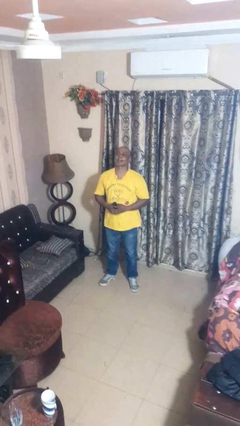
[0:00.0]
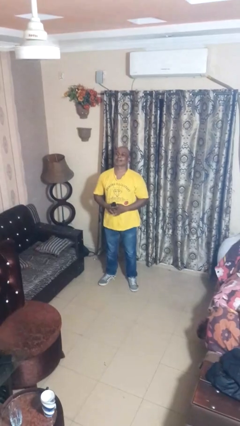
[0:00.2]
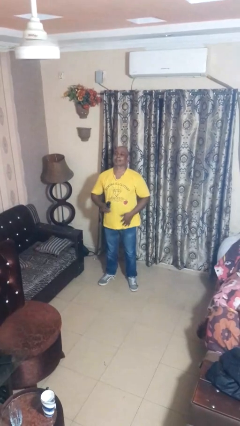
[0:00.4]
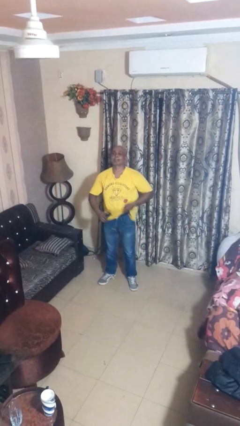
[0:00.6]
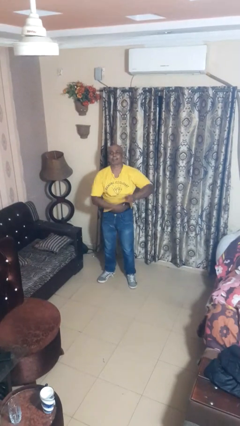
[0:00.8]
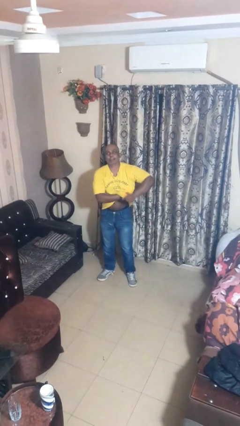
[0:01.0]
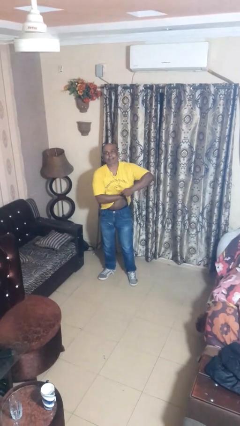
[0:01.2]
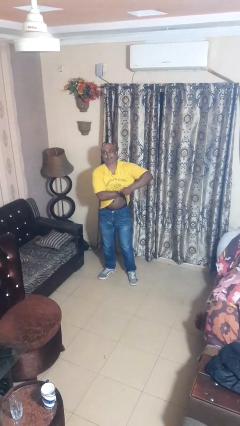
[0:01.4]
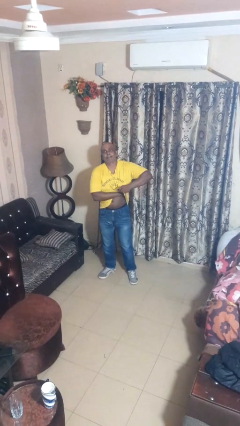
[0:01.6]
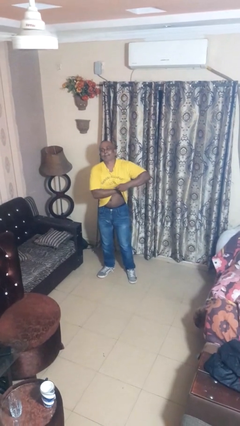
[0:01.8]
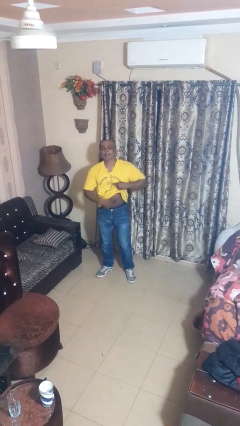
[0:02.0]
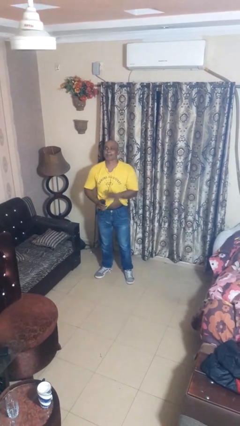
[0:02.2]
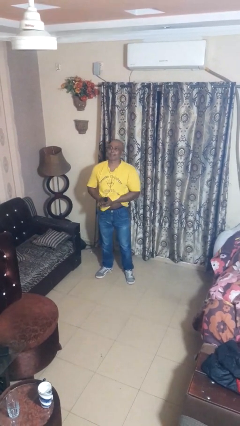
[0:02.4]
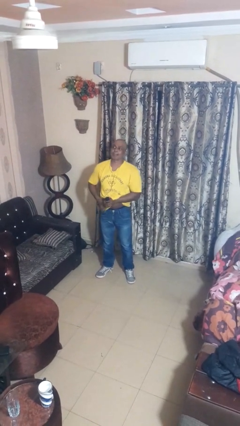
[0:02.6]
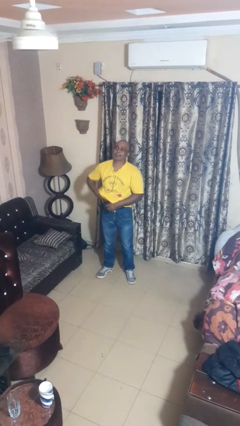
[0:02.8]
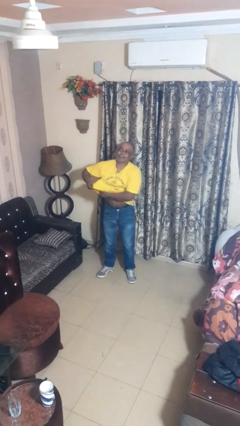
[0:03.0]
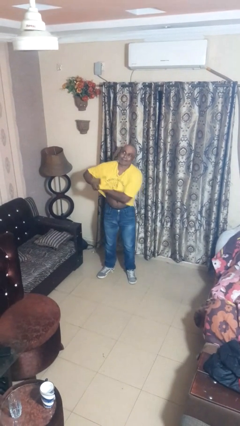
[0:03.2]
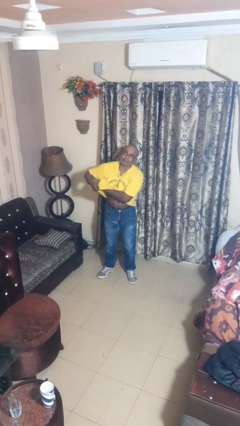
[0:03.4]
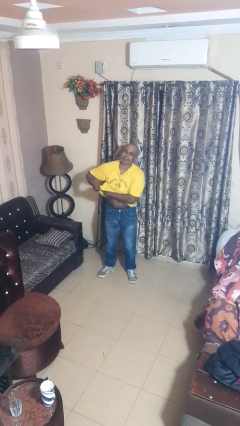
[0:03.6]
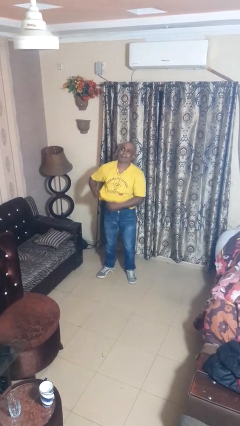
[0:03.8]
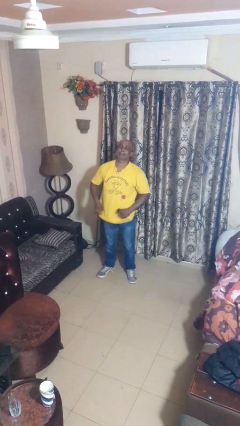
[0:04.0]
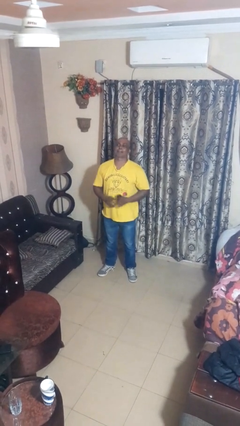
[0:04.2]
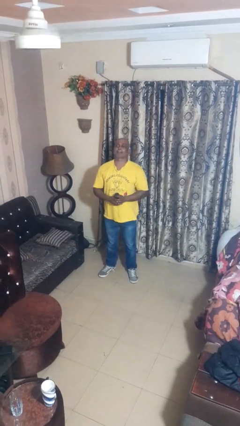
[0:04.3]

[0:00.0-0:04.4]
person applies deodorant

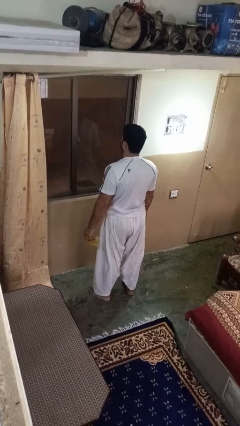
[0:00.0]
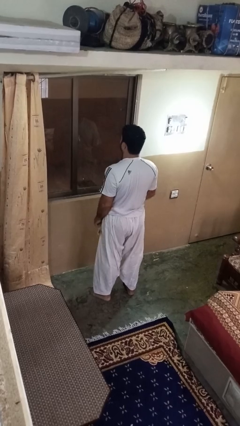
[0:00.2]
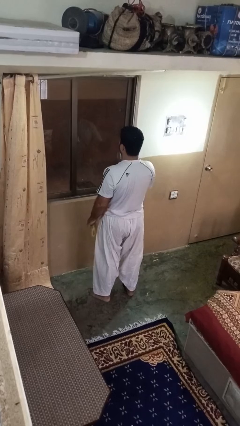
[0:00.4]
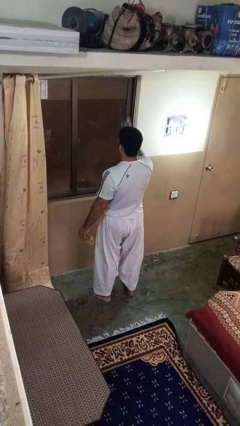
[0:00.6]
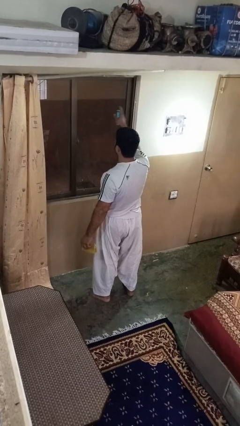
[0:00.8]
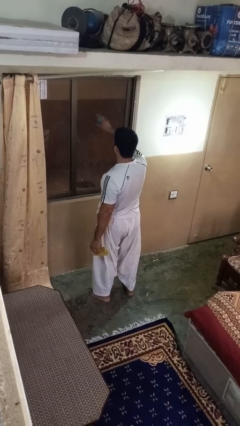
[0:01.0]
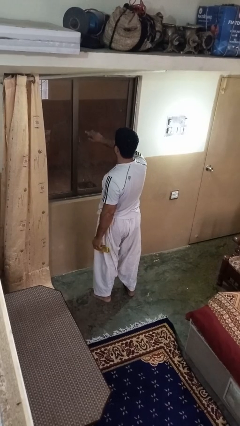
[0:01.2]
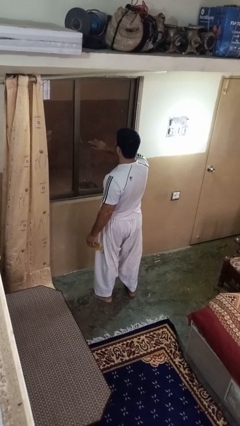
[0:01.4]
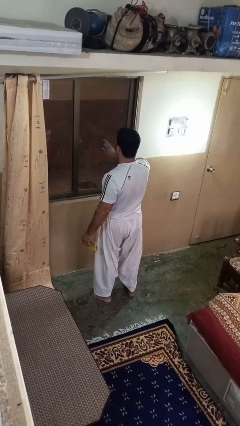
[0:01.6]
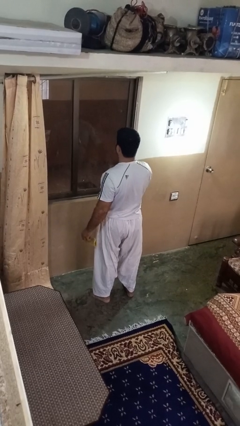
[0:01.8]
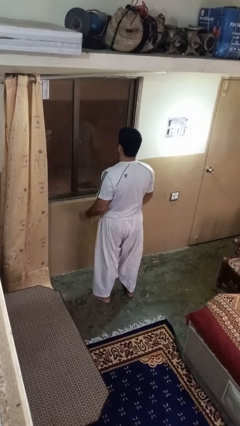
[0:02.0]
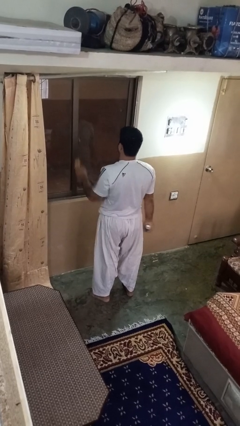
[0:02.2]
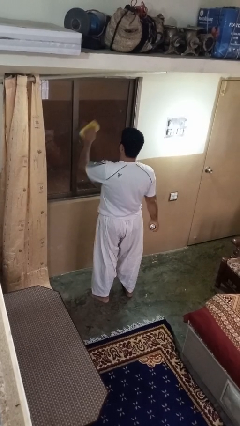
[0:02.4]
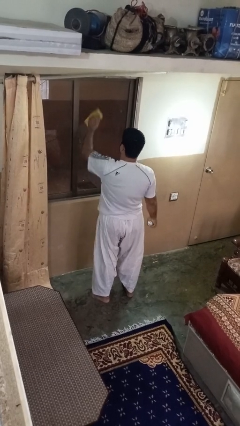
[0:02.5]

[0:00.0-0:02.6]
person sprays from bottle

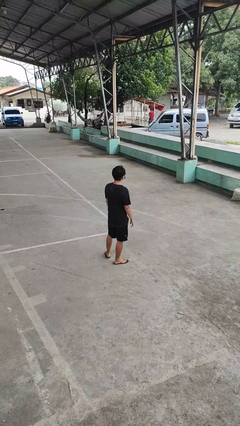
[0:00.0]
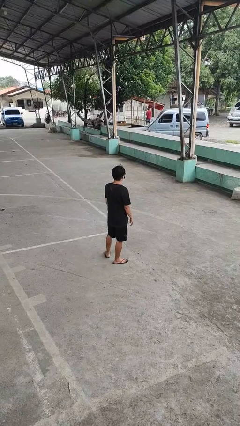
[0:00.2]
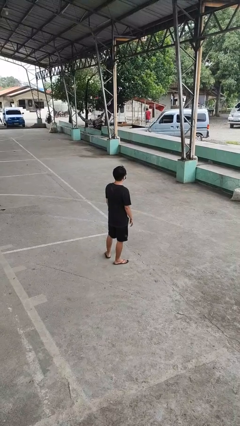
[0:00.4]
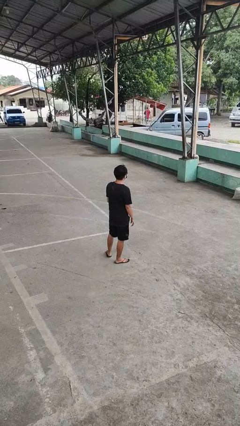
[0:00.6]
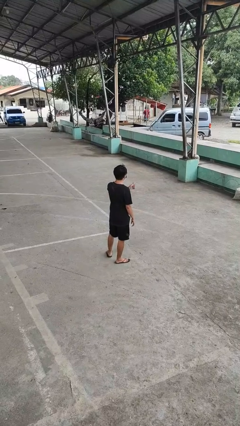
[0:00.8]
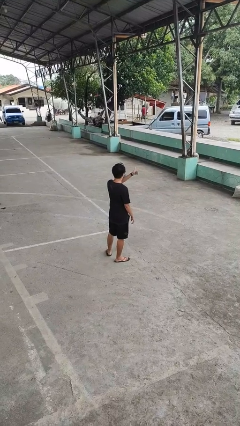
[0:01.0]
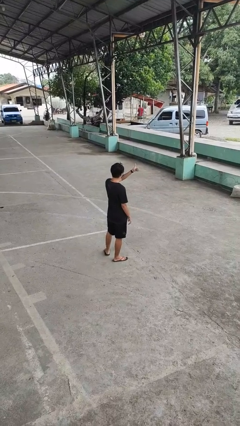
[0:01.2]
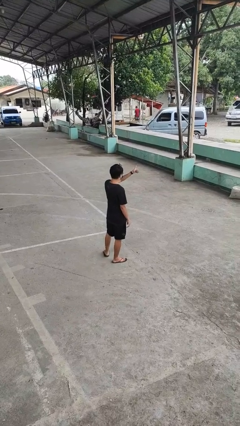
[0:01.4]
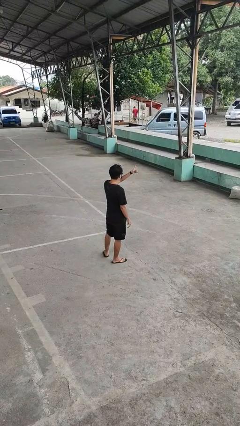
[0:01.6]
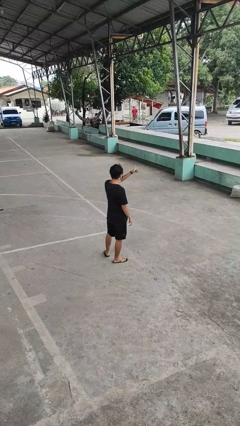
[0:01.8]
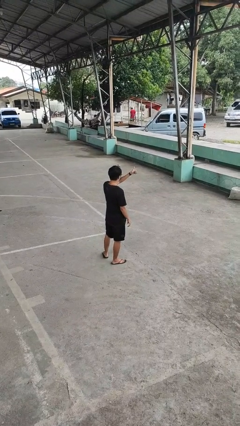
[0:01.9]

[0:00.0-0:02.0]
person gestures thumbs up

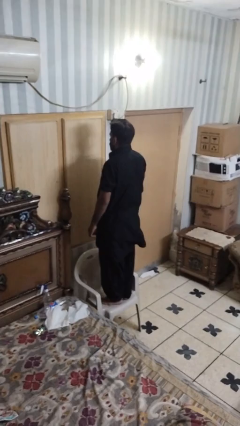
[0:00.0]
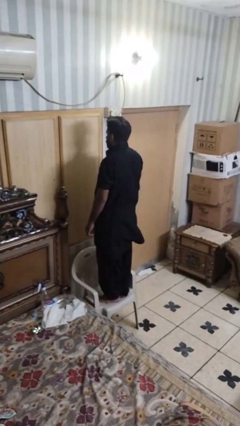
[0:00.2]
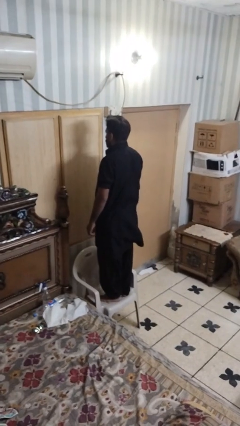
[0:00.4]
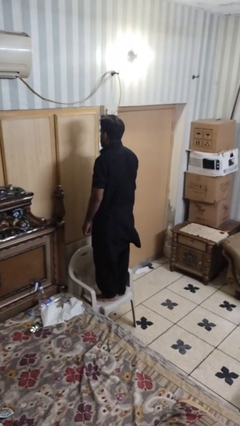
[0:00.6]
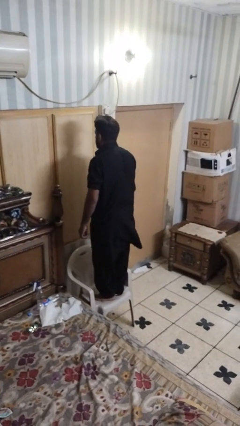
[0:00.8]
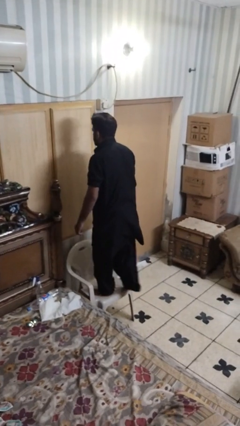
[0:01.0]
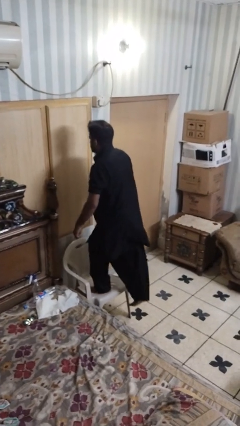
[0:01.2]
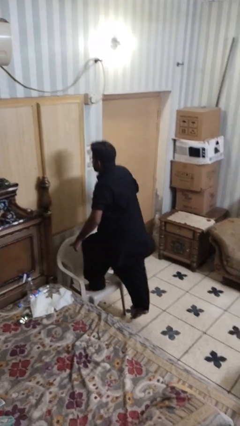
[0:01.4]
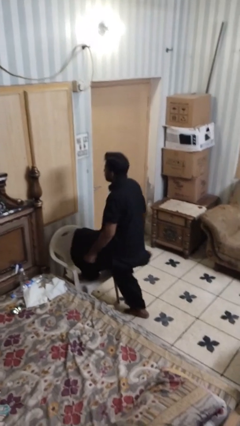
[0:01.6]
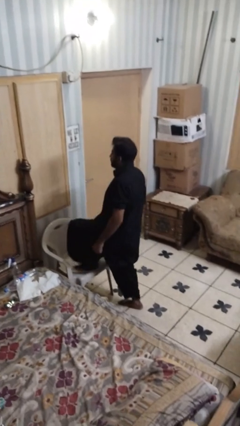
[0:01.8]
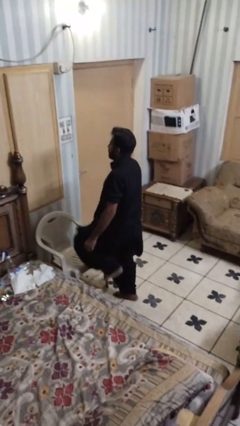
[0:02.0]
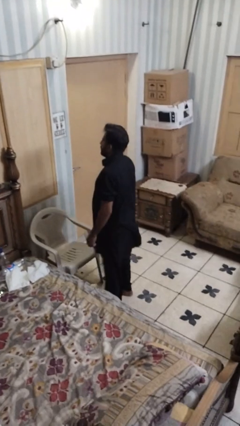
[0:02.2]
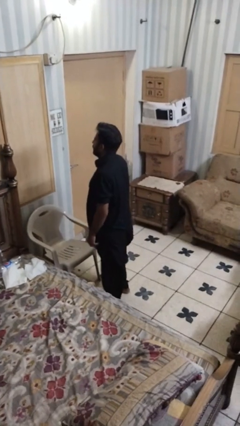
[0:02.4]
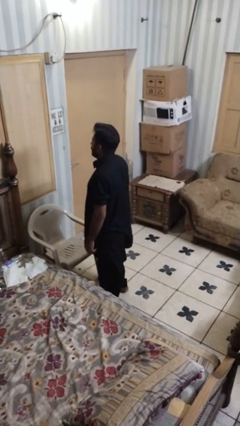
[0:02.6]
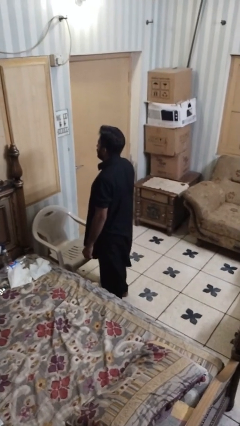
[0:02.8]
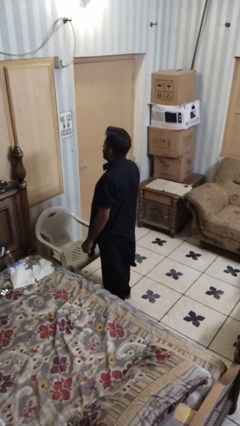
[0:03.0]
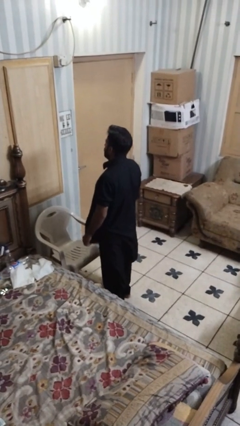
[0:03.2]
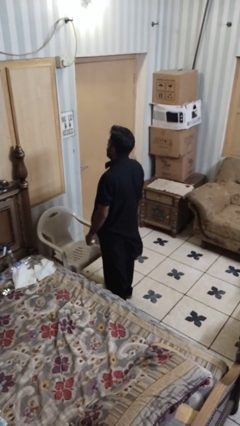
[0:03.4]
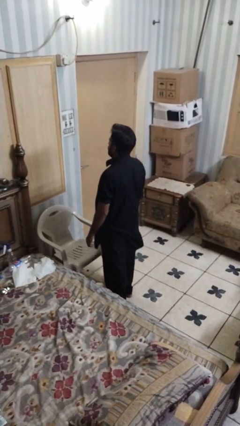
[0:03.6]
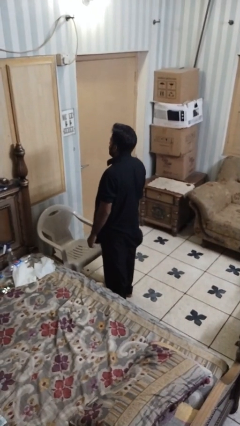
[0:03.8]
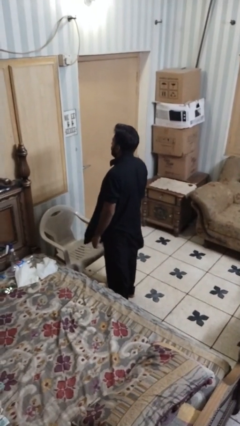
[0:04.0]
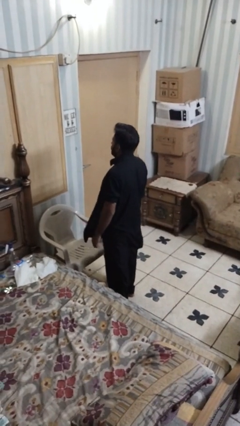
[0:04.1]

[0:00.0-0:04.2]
person climbs off chair

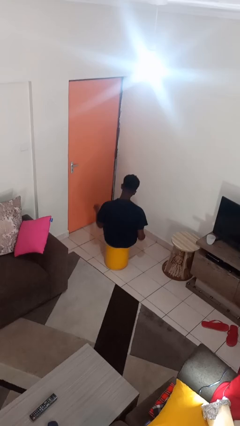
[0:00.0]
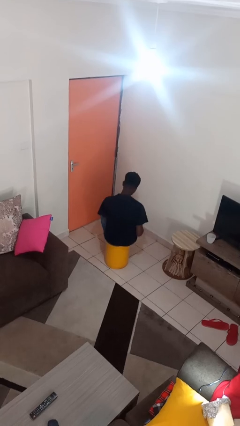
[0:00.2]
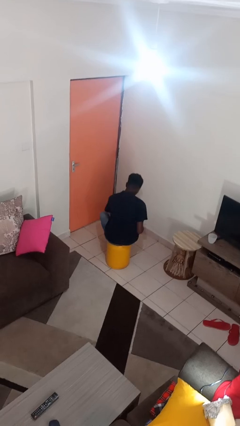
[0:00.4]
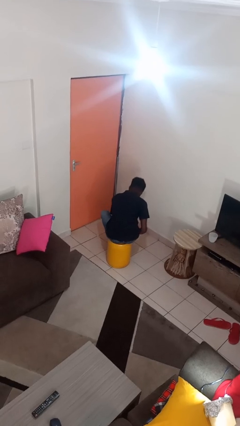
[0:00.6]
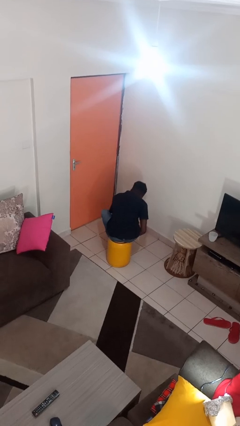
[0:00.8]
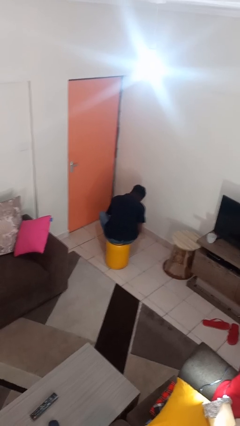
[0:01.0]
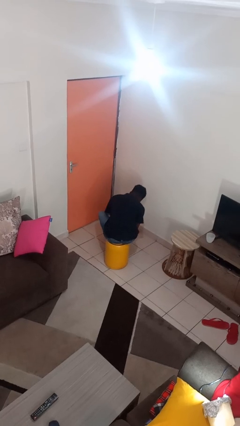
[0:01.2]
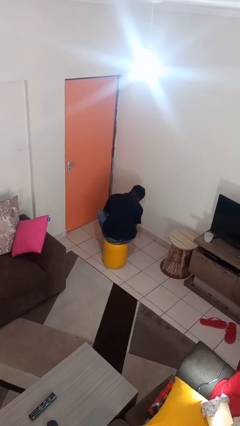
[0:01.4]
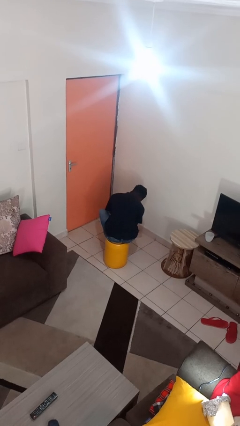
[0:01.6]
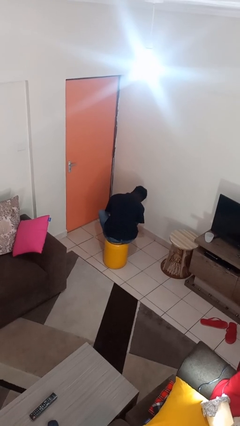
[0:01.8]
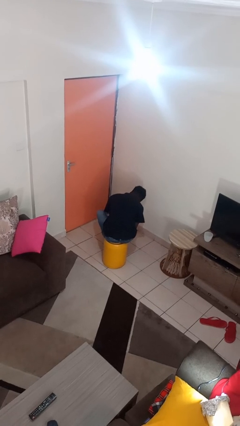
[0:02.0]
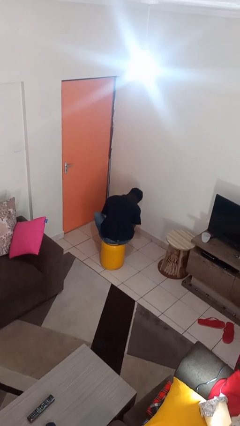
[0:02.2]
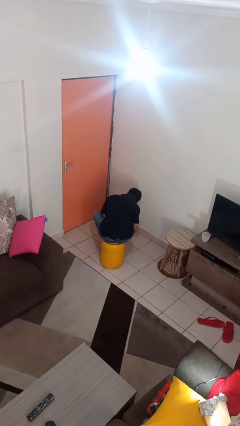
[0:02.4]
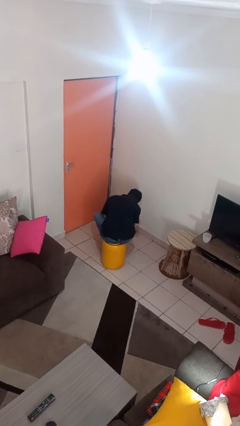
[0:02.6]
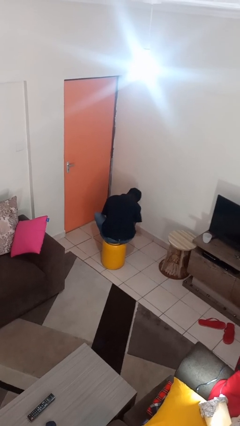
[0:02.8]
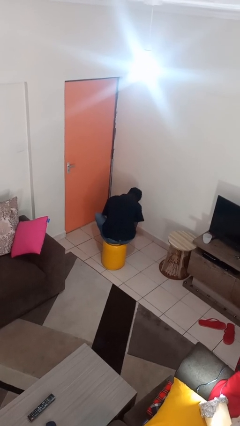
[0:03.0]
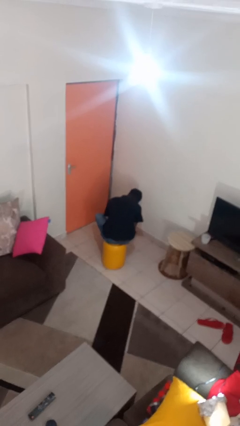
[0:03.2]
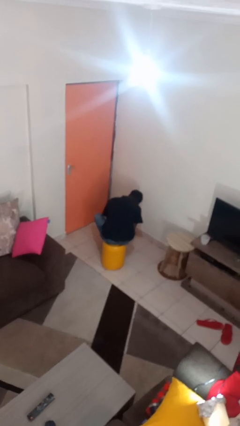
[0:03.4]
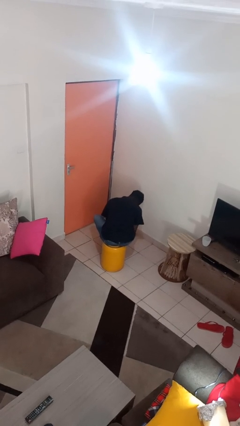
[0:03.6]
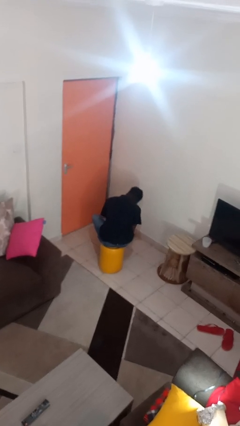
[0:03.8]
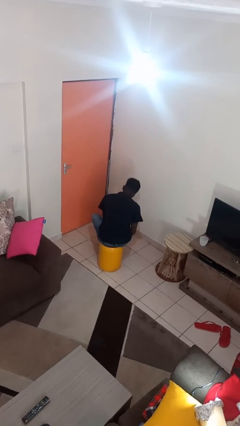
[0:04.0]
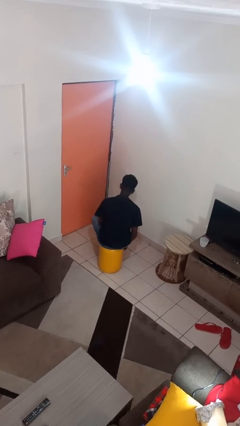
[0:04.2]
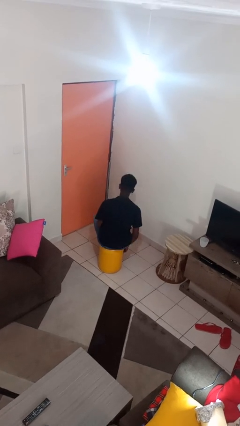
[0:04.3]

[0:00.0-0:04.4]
person rubs foot
